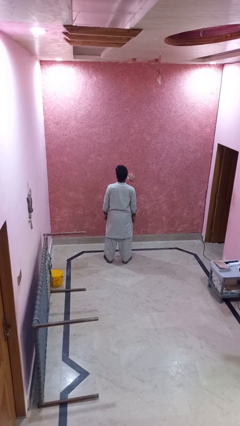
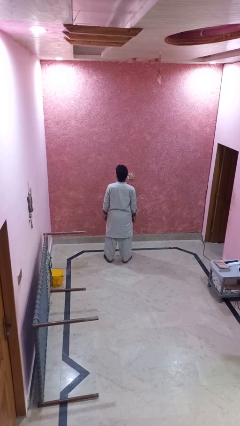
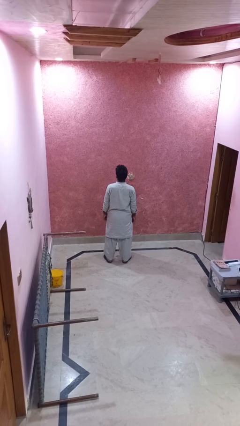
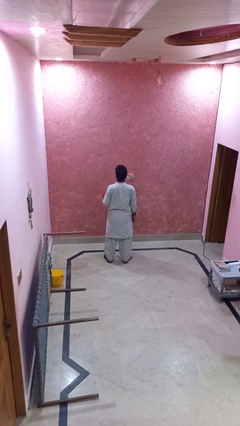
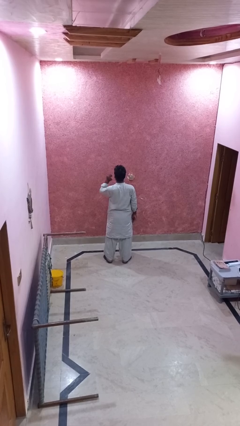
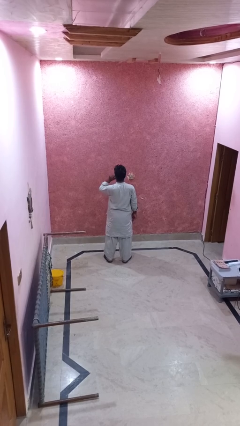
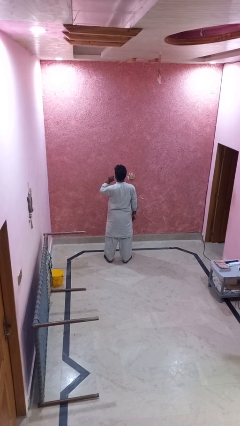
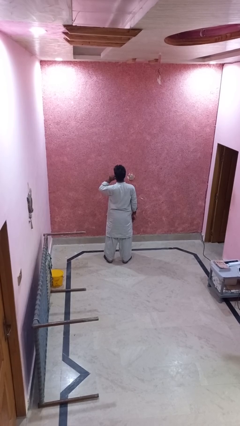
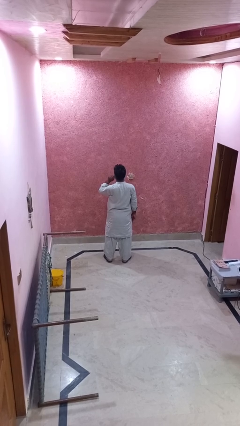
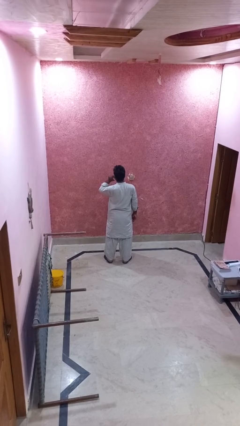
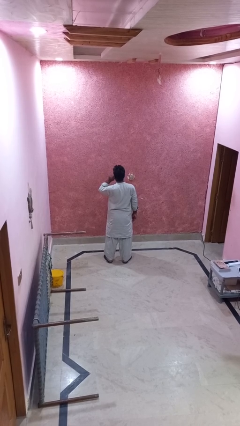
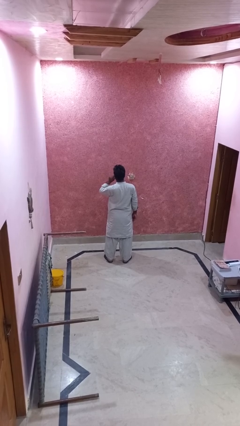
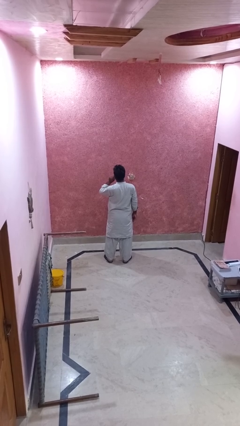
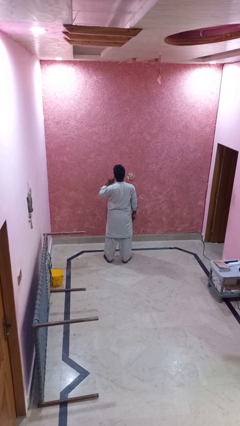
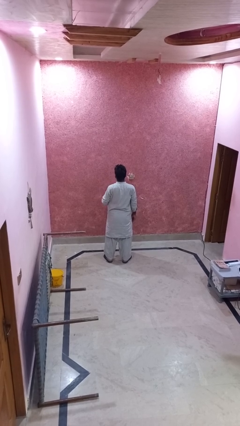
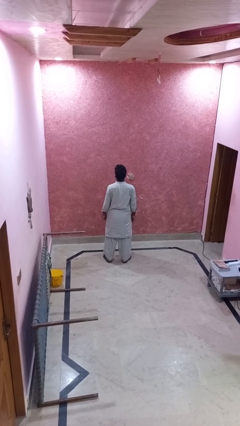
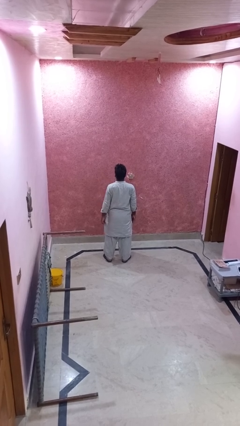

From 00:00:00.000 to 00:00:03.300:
person touches earlobe

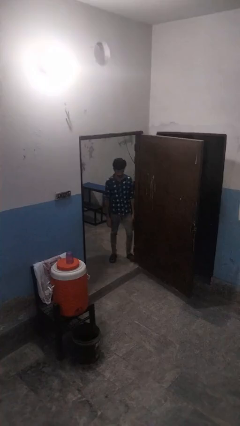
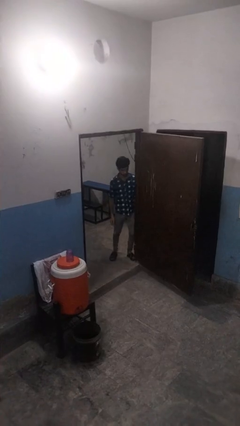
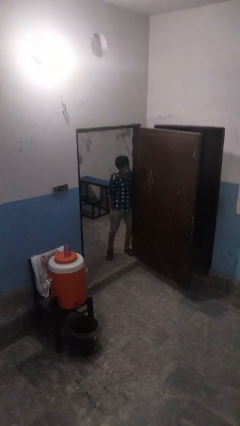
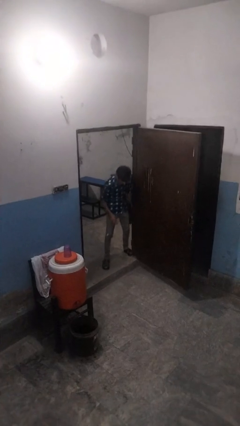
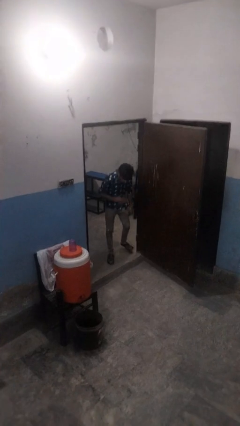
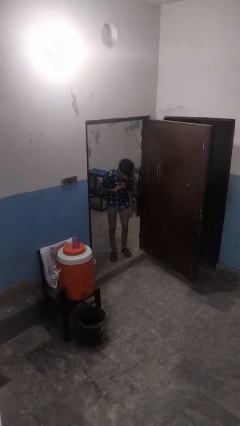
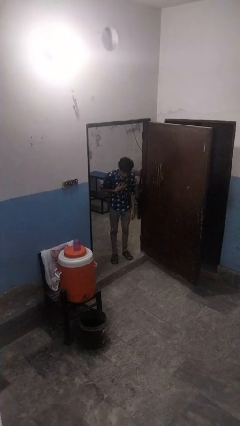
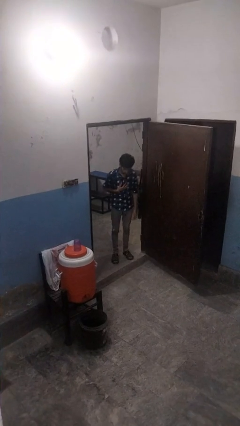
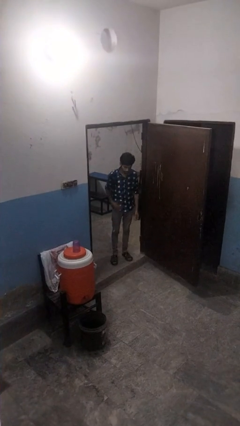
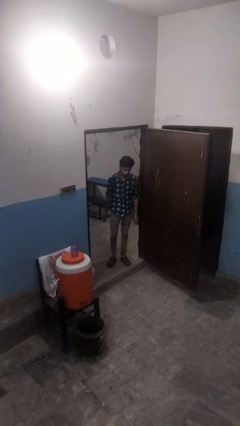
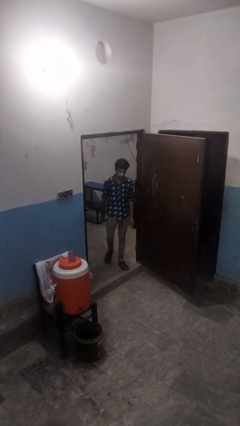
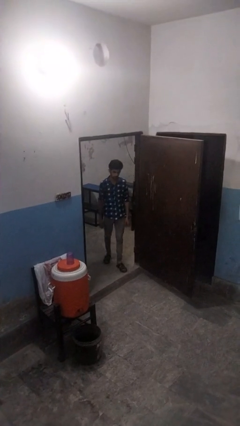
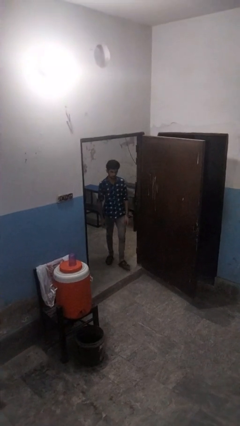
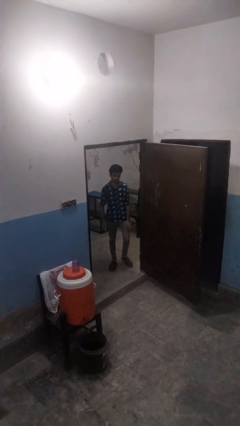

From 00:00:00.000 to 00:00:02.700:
person bumps into wall

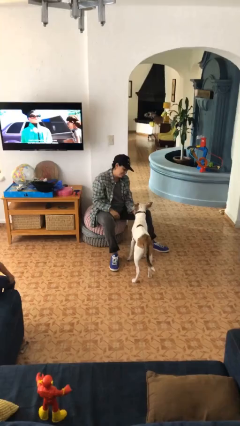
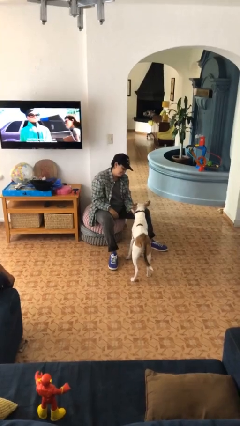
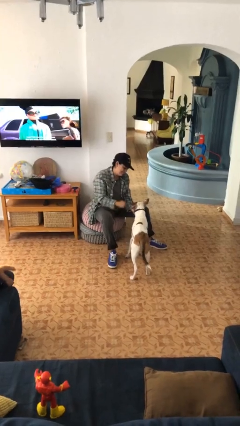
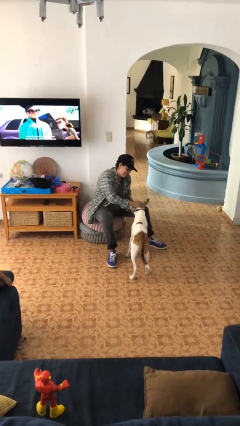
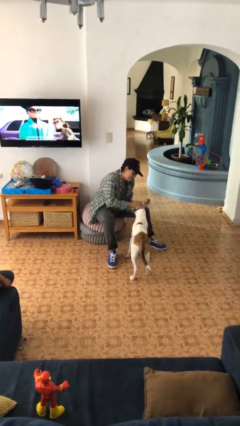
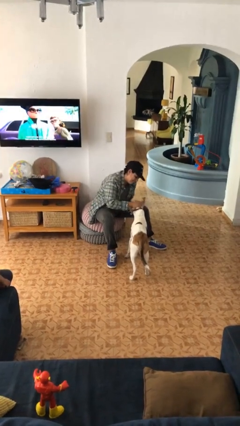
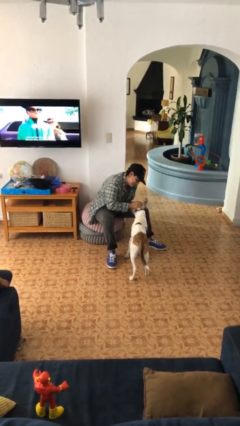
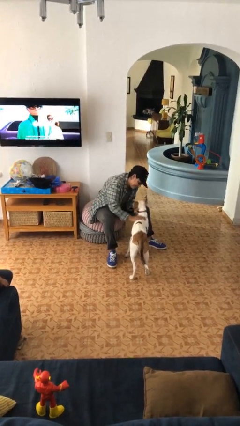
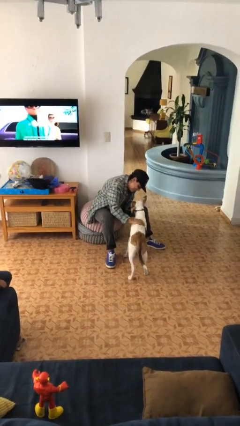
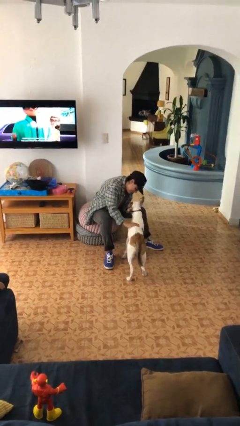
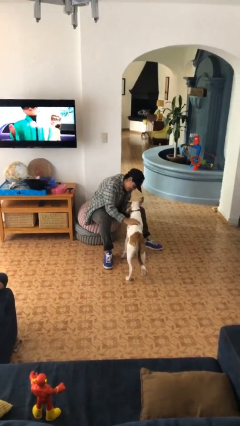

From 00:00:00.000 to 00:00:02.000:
person pets dog

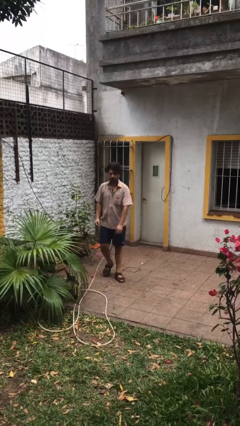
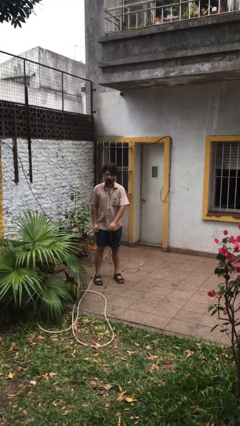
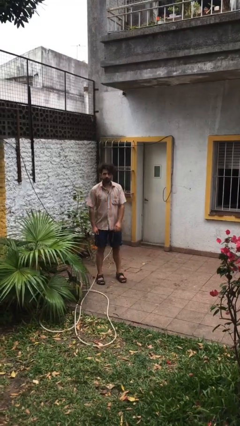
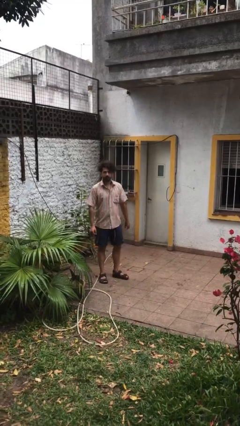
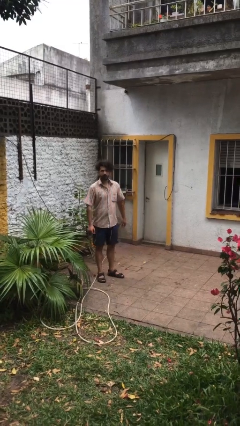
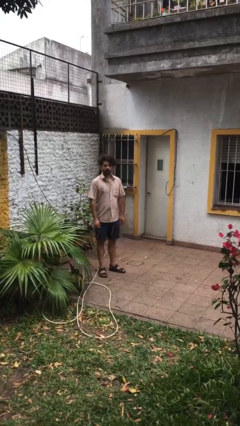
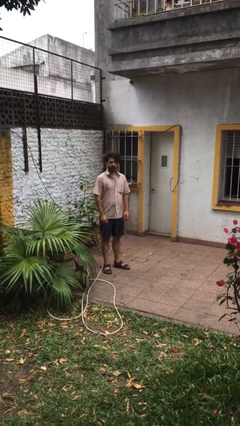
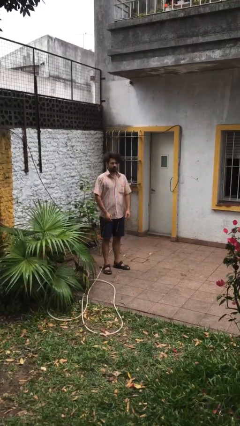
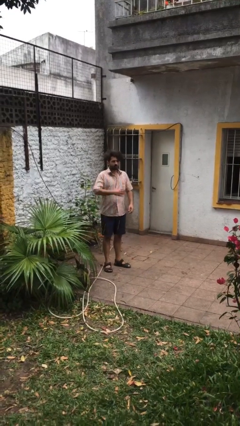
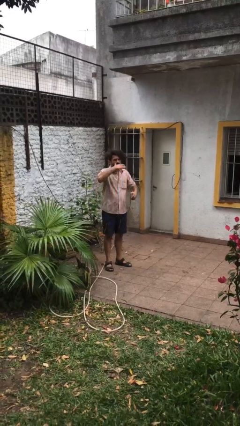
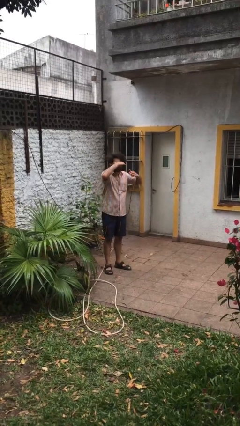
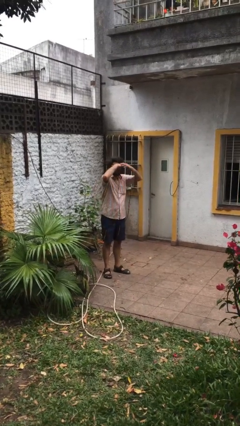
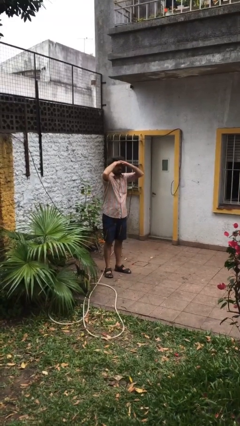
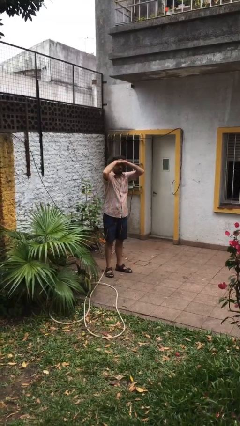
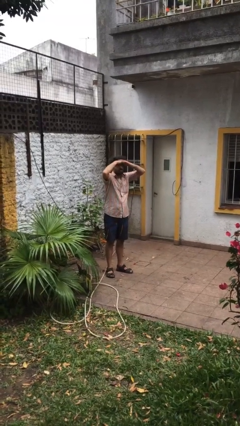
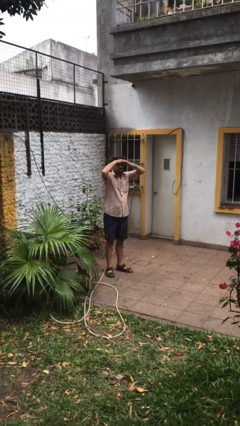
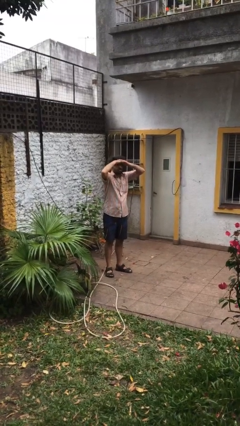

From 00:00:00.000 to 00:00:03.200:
person shades eyes

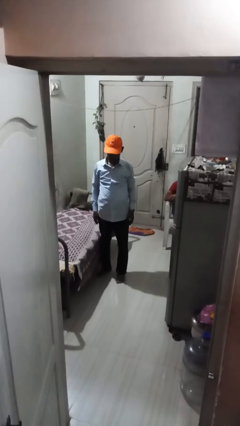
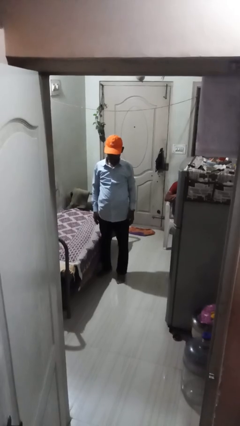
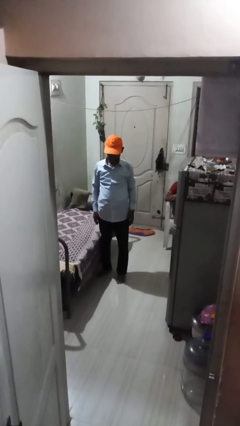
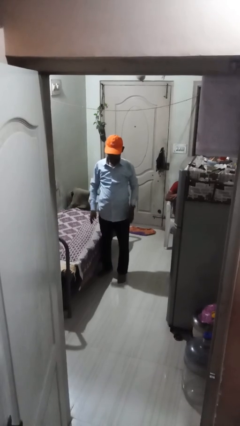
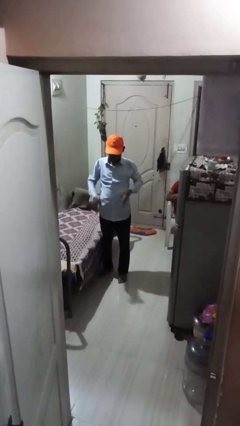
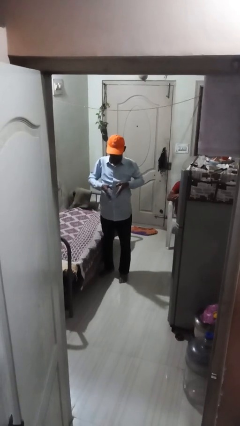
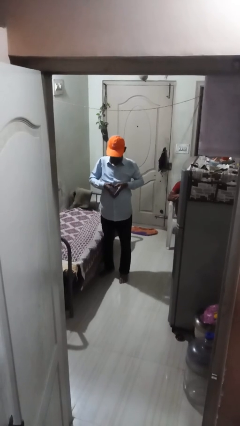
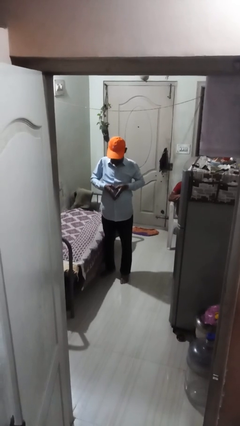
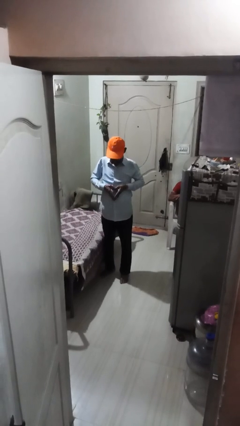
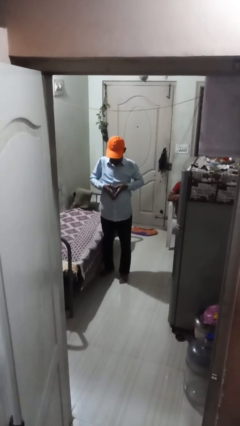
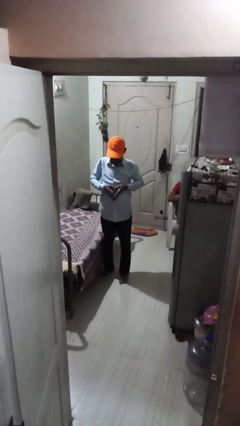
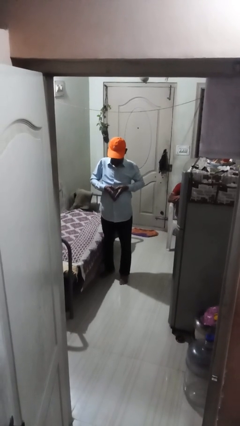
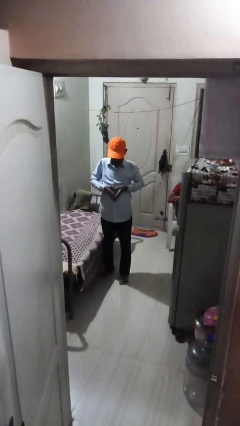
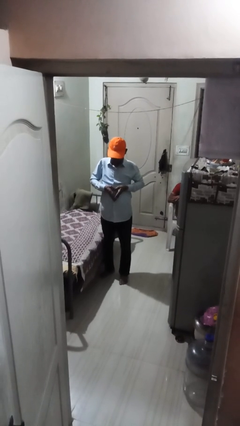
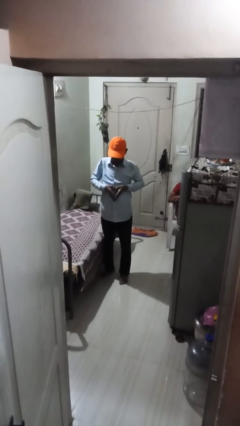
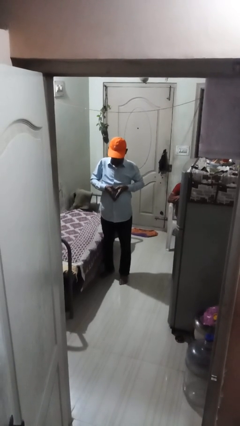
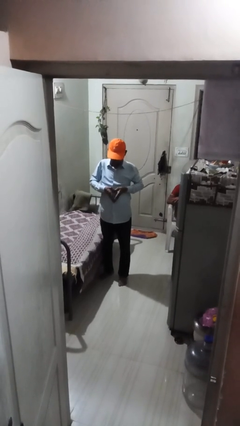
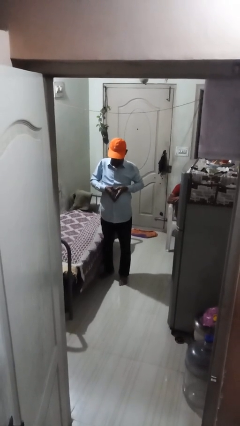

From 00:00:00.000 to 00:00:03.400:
person gestures heart

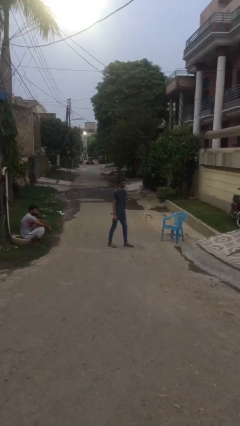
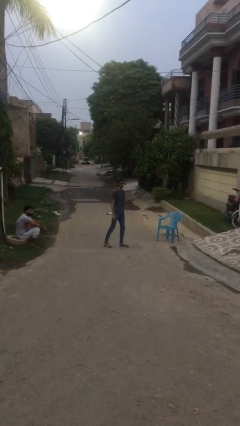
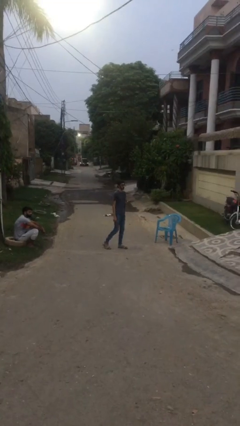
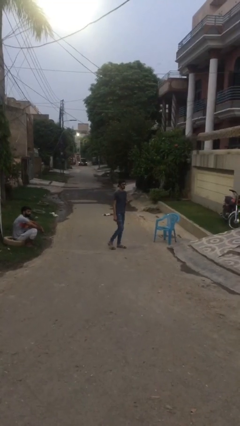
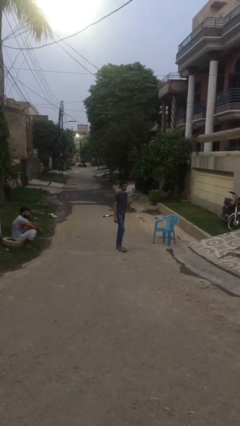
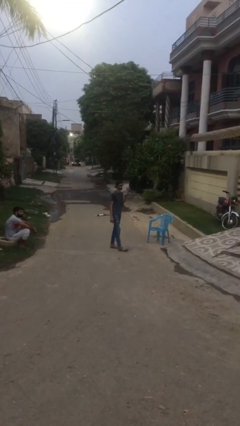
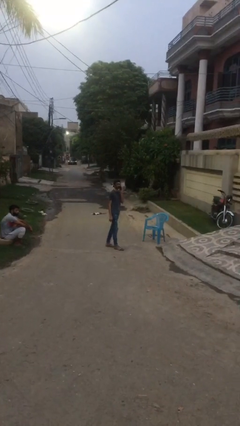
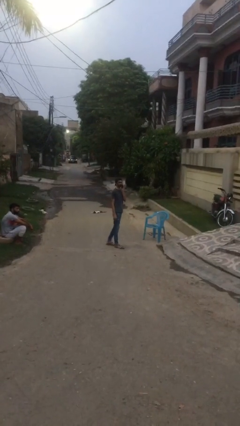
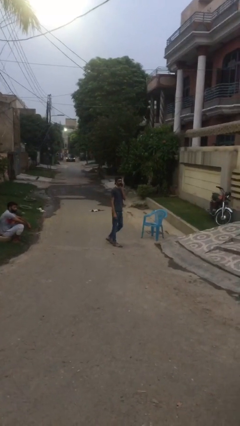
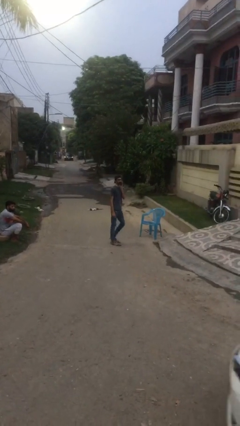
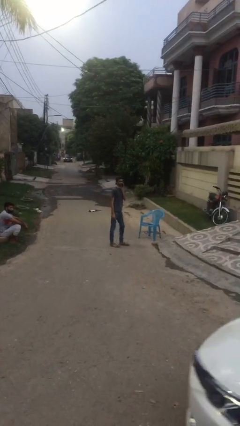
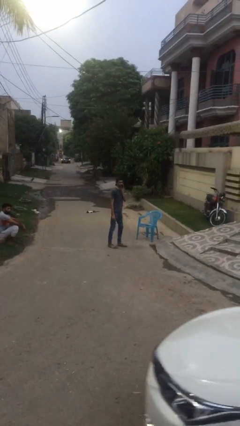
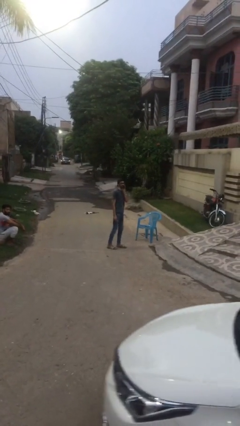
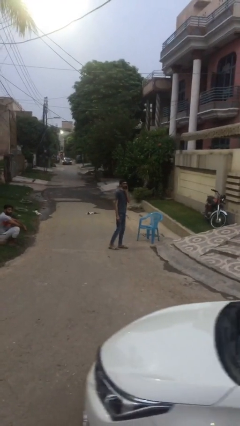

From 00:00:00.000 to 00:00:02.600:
person talks on phone

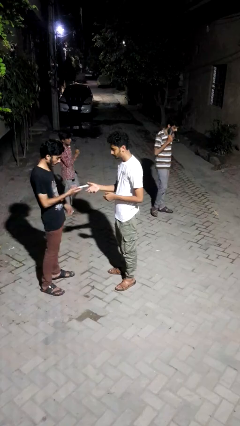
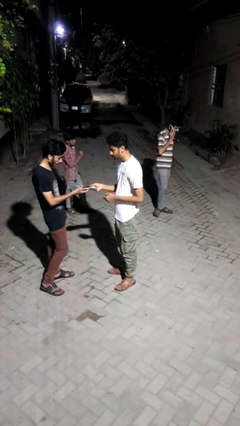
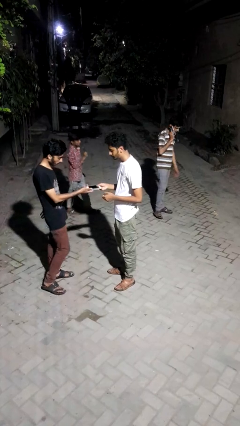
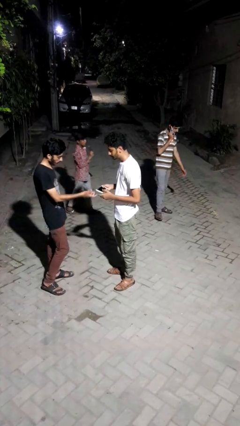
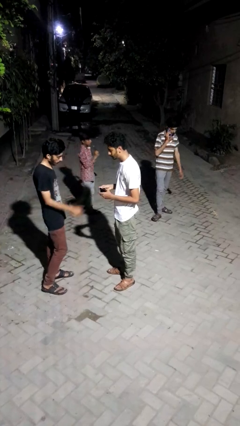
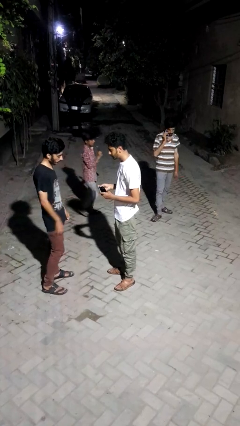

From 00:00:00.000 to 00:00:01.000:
person transfers object to person
